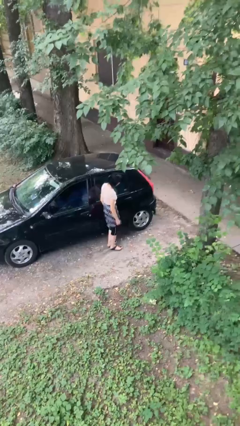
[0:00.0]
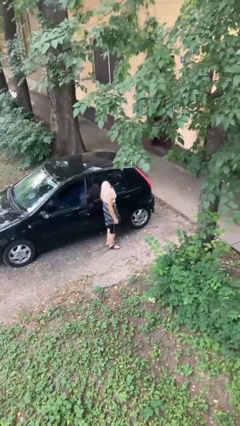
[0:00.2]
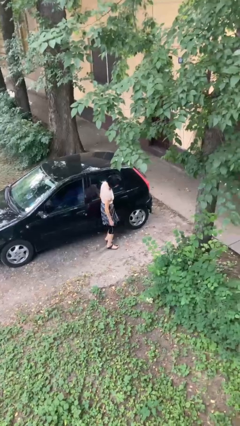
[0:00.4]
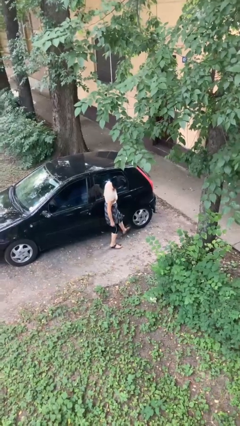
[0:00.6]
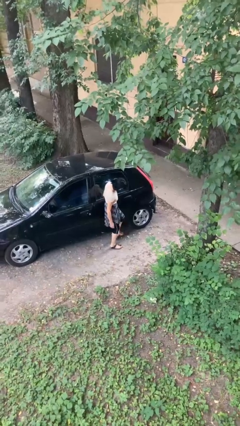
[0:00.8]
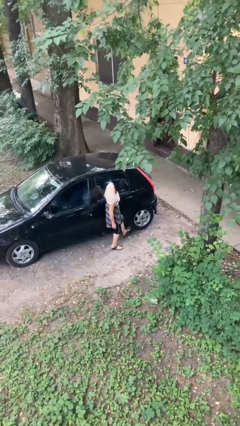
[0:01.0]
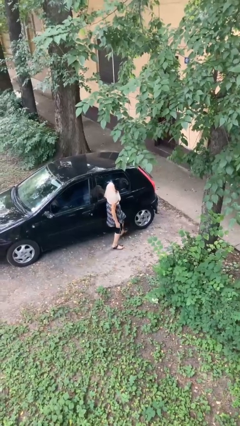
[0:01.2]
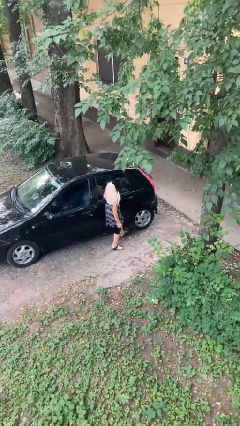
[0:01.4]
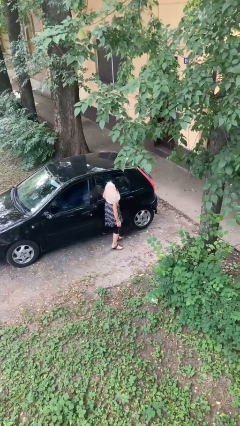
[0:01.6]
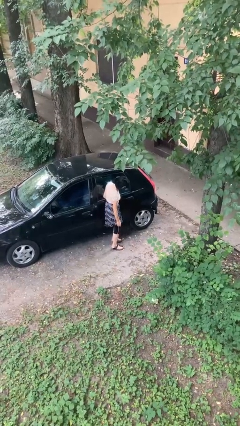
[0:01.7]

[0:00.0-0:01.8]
person kicks car tires

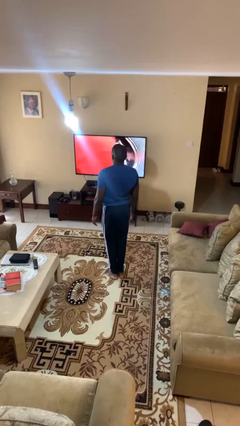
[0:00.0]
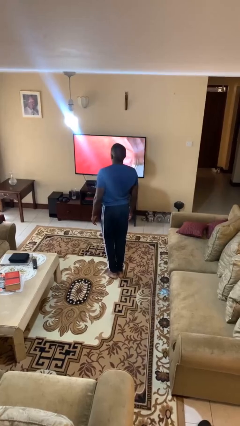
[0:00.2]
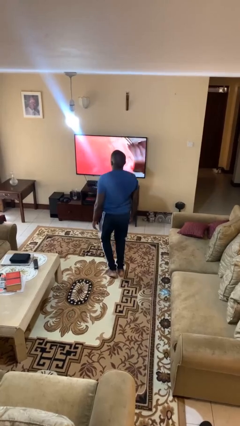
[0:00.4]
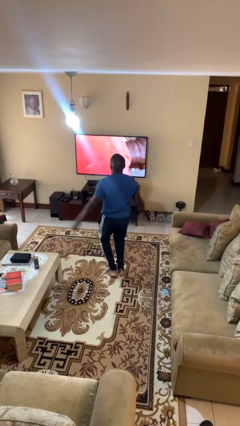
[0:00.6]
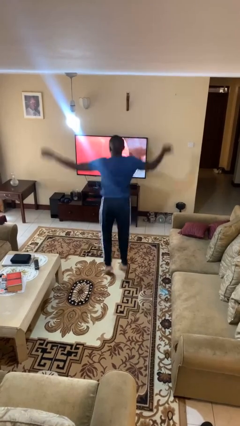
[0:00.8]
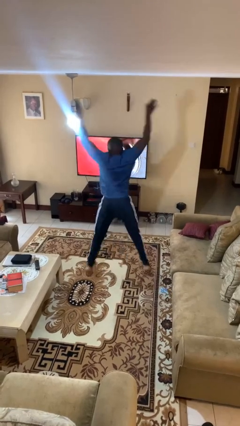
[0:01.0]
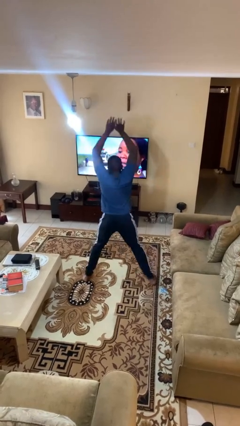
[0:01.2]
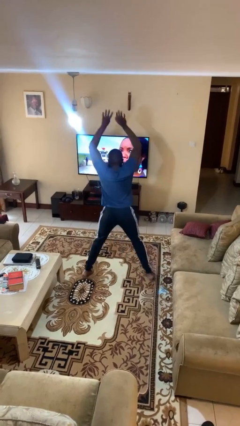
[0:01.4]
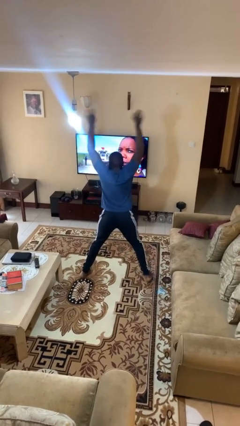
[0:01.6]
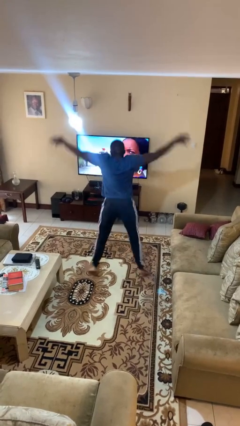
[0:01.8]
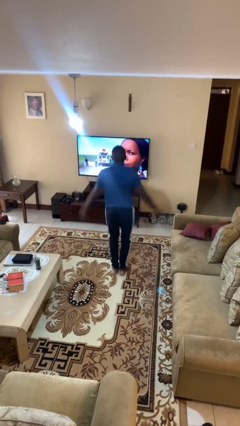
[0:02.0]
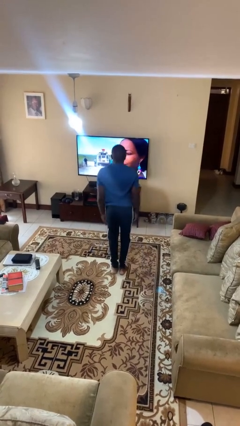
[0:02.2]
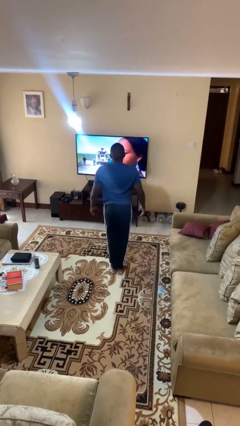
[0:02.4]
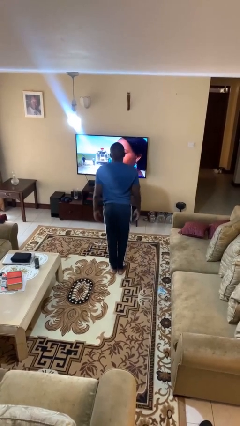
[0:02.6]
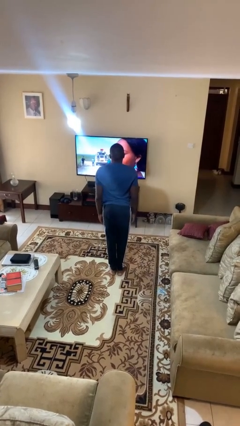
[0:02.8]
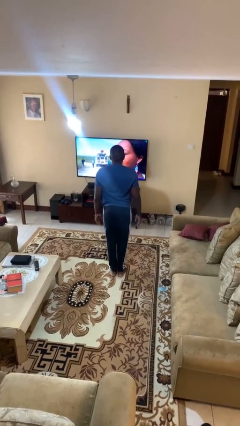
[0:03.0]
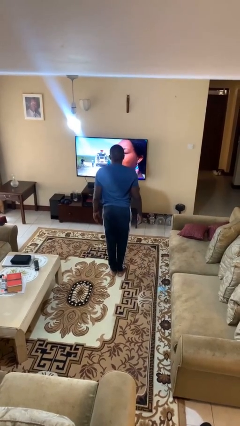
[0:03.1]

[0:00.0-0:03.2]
person exercises with jumping jacks

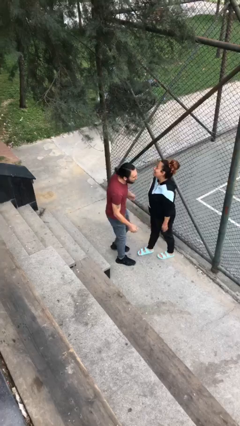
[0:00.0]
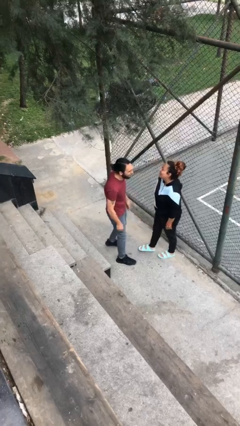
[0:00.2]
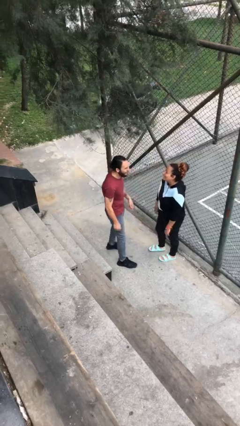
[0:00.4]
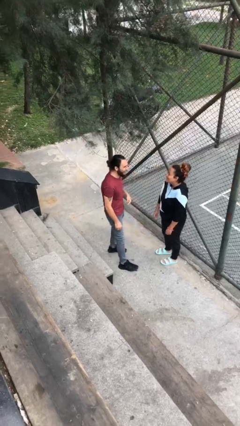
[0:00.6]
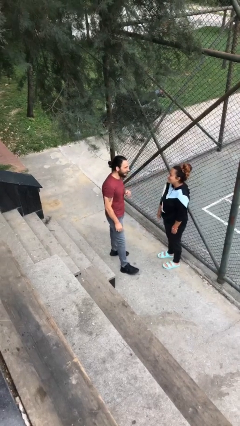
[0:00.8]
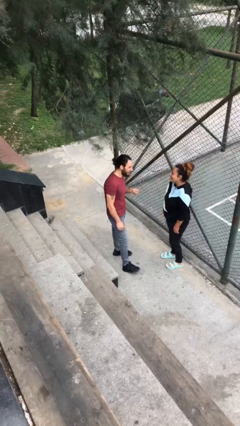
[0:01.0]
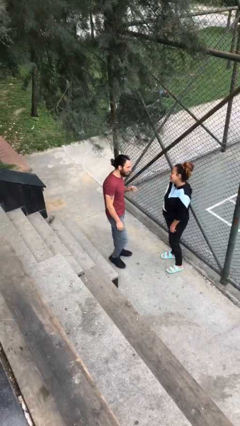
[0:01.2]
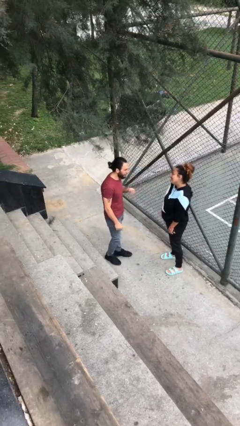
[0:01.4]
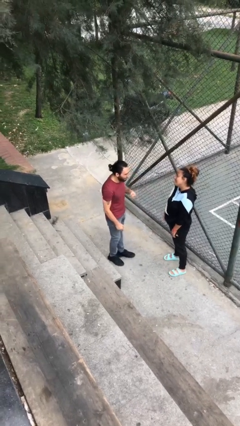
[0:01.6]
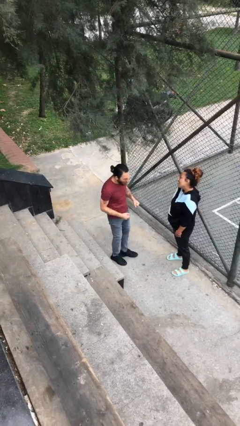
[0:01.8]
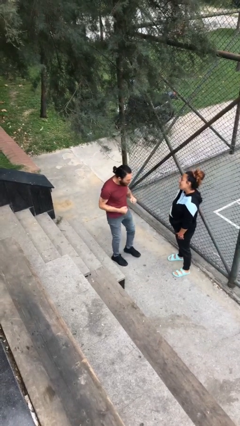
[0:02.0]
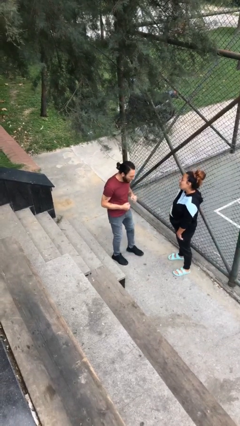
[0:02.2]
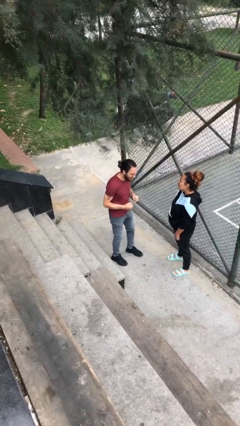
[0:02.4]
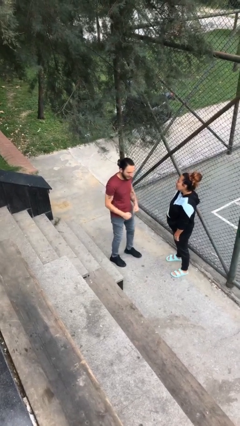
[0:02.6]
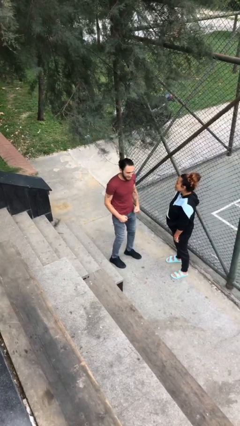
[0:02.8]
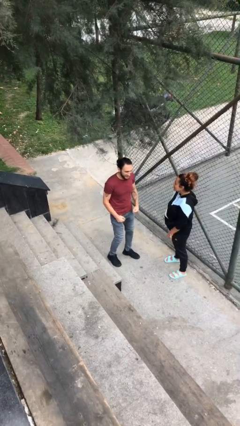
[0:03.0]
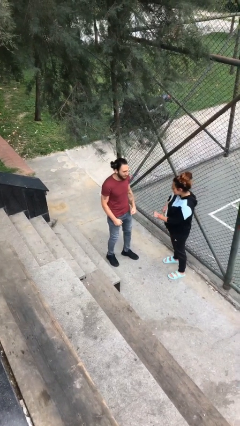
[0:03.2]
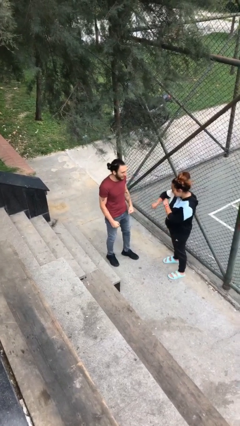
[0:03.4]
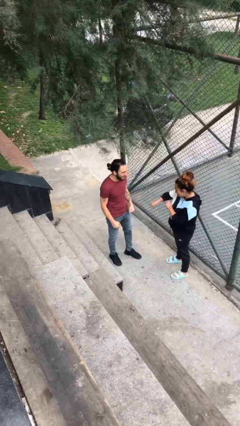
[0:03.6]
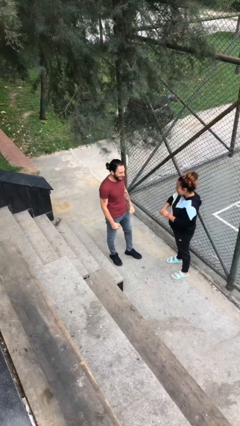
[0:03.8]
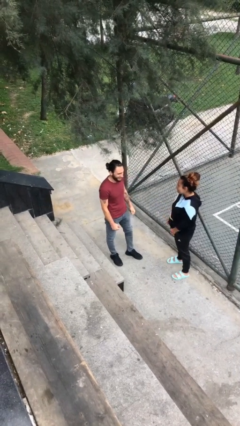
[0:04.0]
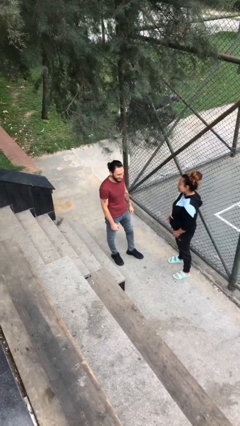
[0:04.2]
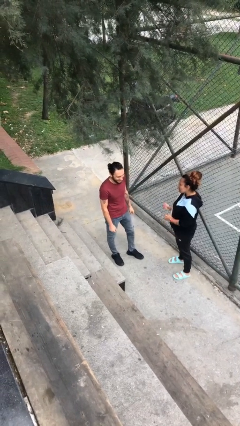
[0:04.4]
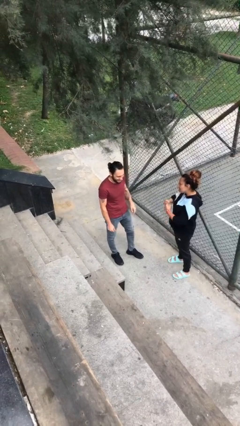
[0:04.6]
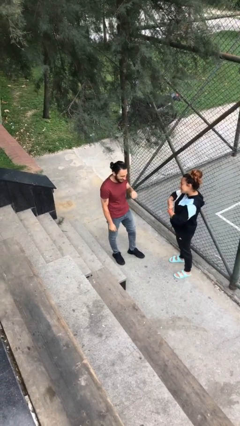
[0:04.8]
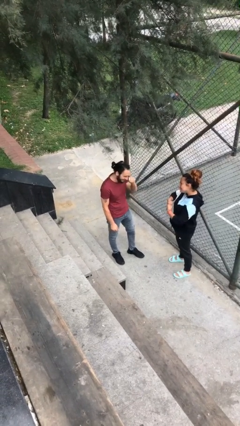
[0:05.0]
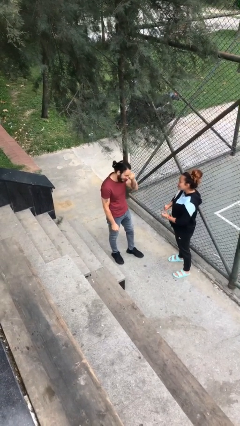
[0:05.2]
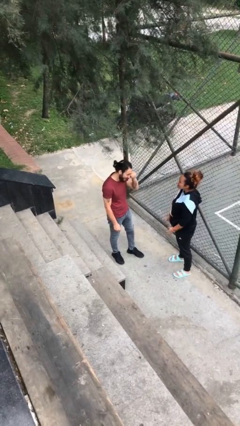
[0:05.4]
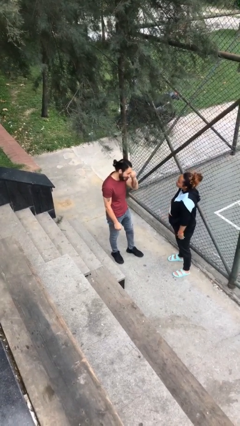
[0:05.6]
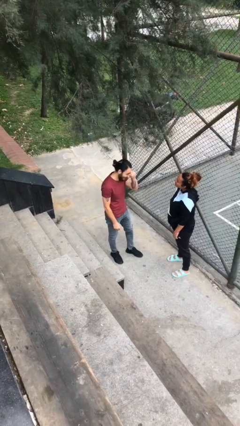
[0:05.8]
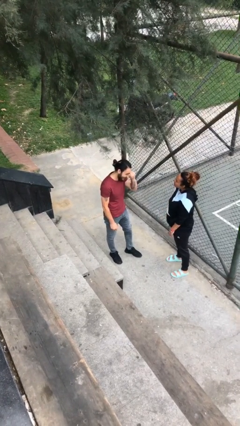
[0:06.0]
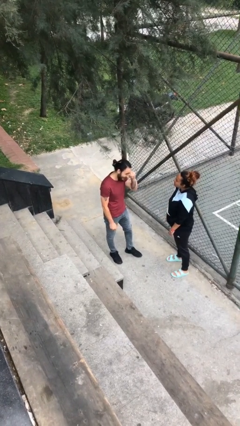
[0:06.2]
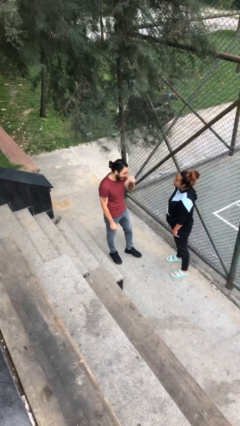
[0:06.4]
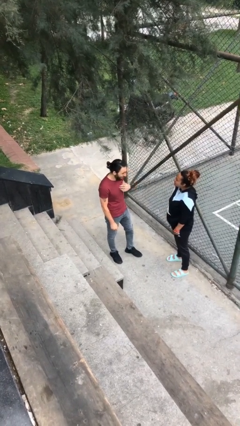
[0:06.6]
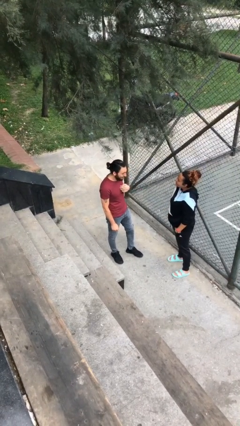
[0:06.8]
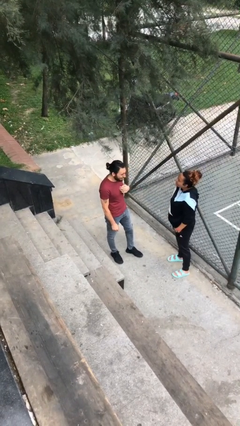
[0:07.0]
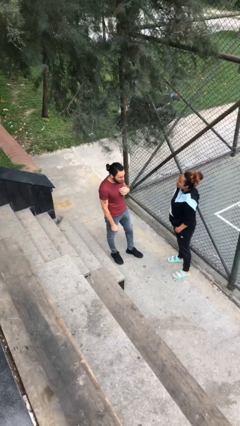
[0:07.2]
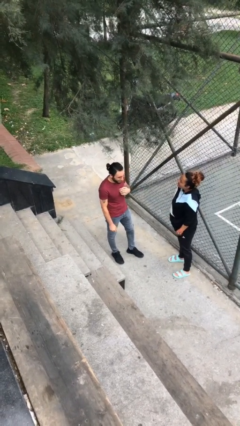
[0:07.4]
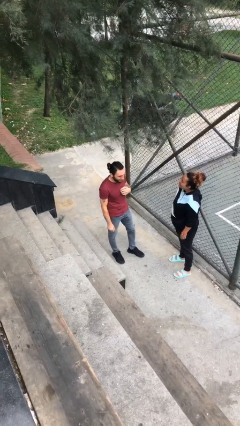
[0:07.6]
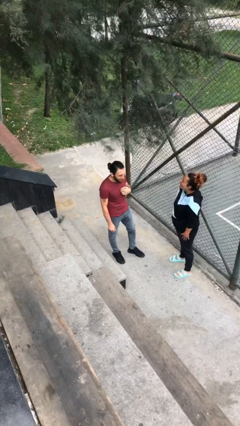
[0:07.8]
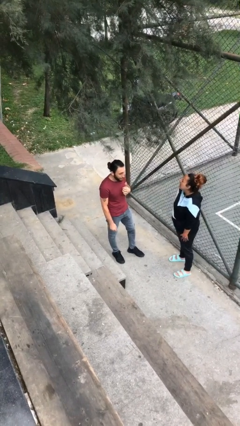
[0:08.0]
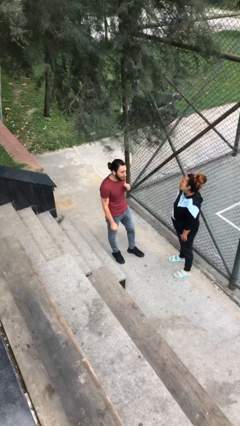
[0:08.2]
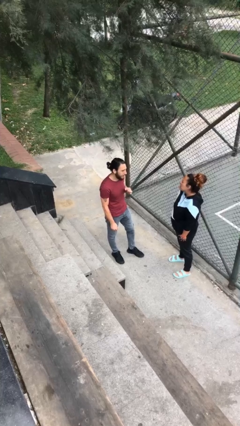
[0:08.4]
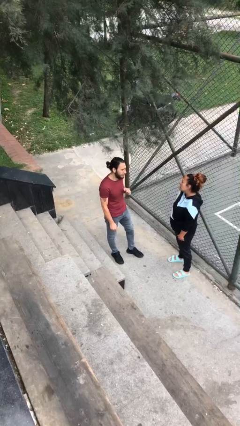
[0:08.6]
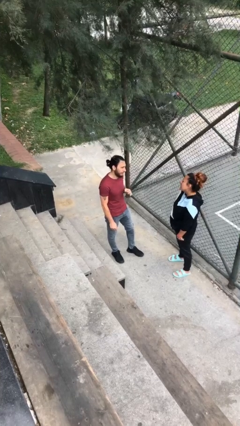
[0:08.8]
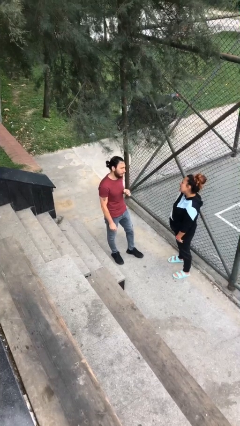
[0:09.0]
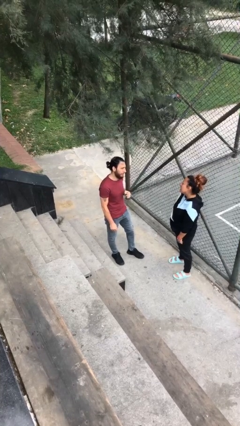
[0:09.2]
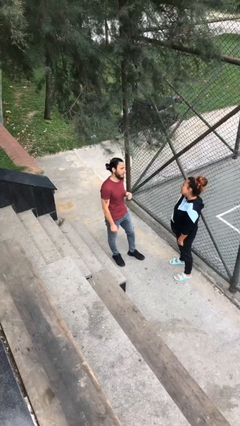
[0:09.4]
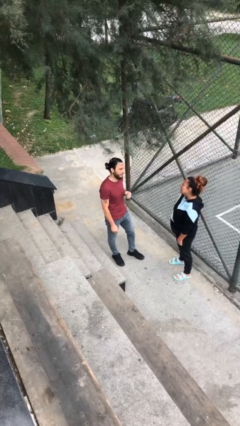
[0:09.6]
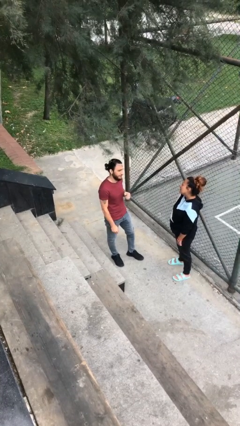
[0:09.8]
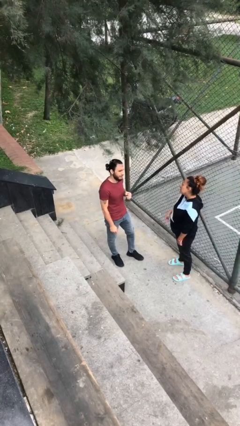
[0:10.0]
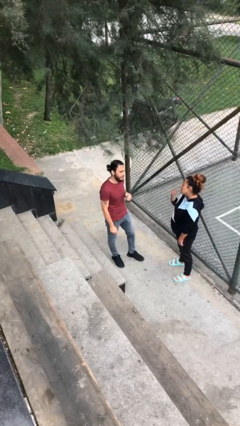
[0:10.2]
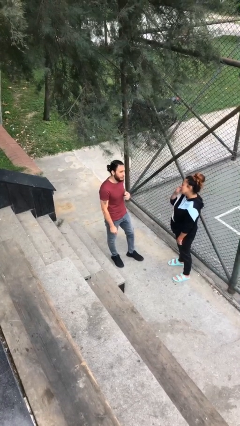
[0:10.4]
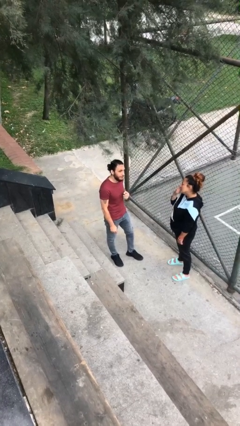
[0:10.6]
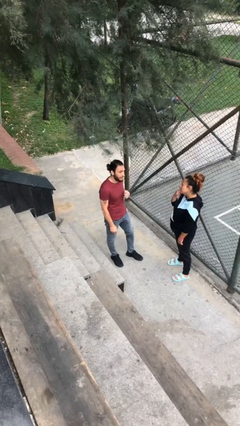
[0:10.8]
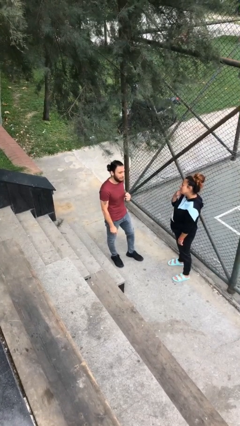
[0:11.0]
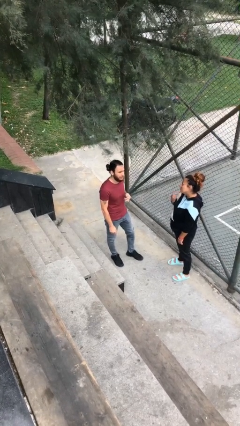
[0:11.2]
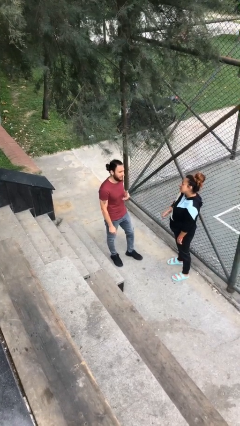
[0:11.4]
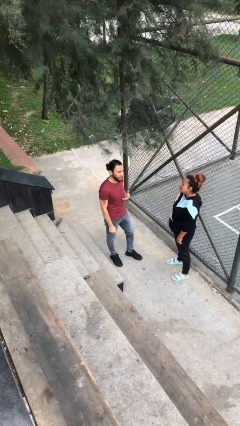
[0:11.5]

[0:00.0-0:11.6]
person talks to person

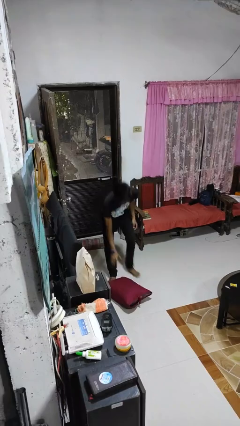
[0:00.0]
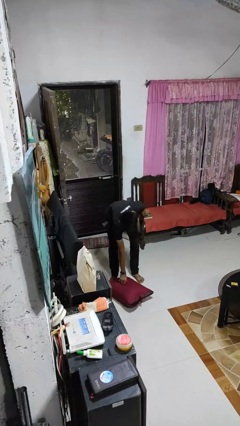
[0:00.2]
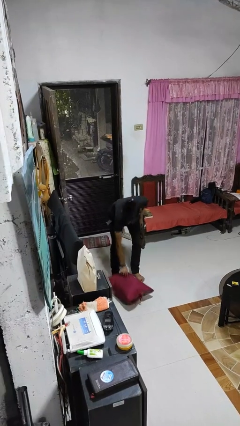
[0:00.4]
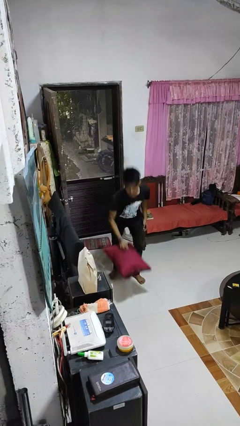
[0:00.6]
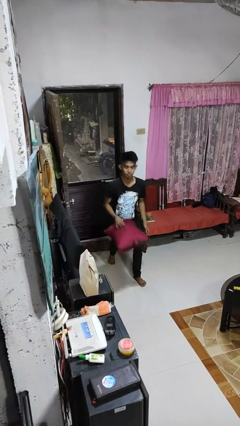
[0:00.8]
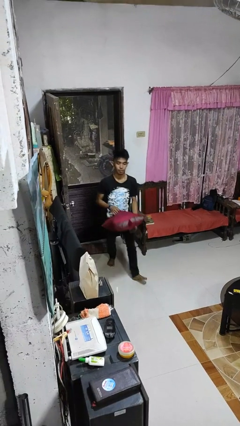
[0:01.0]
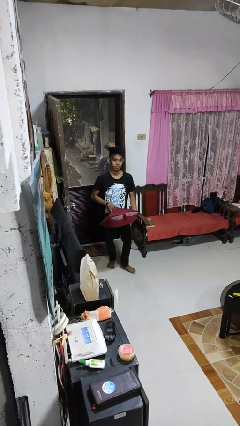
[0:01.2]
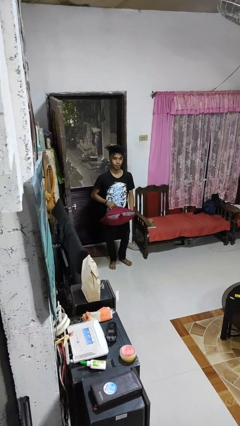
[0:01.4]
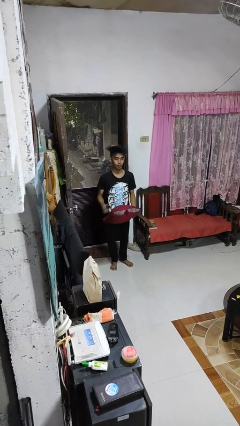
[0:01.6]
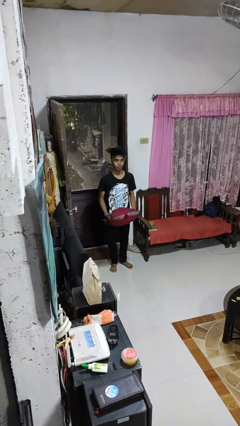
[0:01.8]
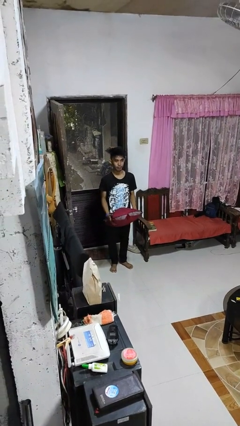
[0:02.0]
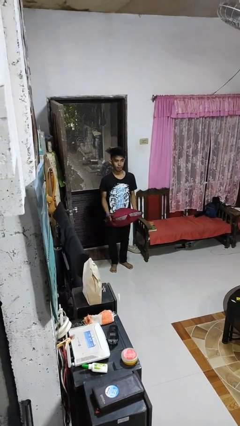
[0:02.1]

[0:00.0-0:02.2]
person picks up object from floor
